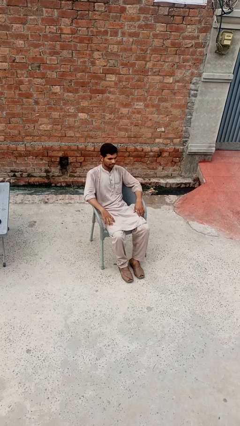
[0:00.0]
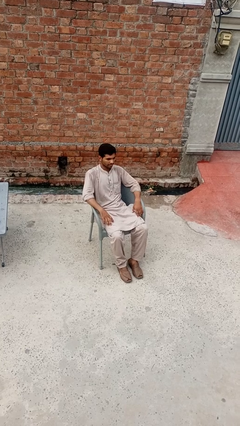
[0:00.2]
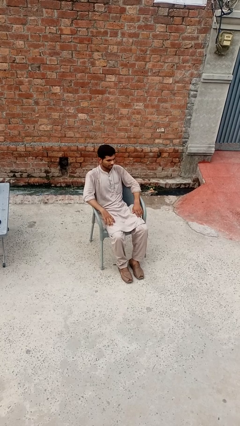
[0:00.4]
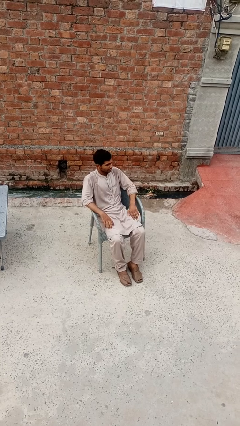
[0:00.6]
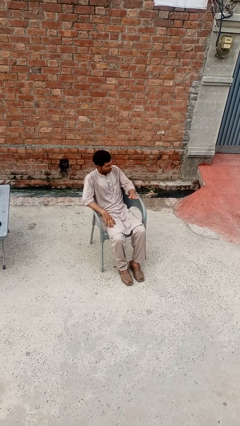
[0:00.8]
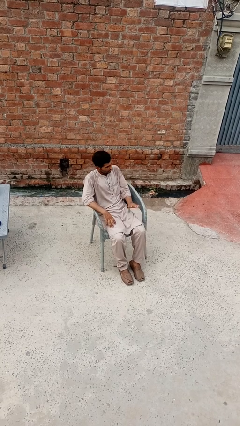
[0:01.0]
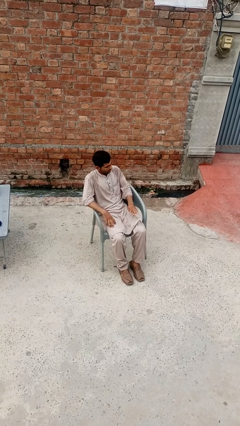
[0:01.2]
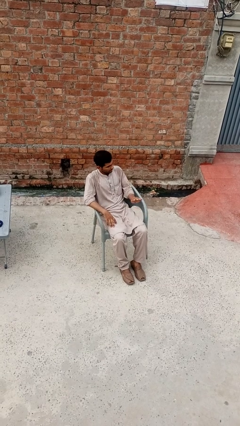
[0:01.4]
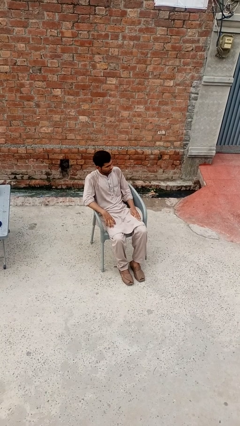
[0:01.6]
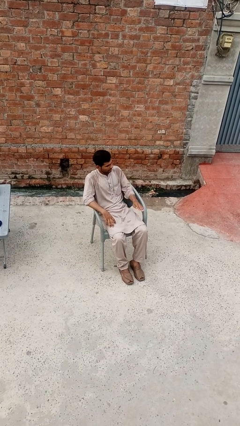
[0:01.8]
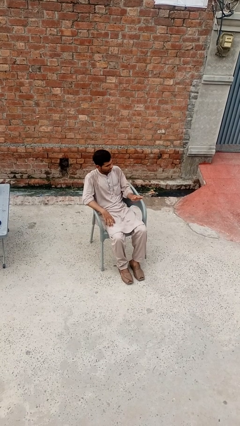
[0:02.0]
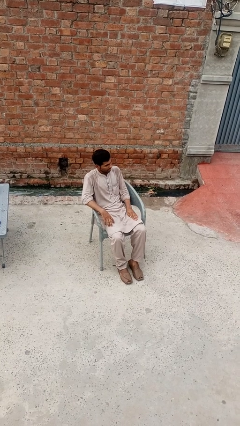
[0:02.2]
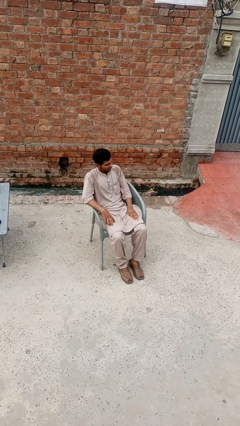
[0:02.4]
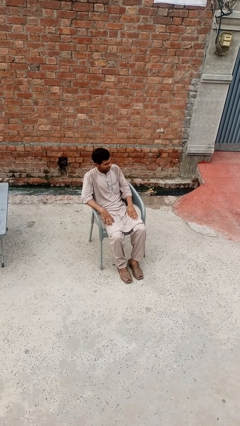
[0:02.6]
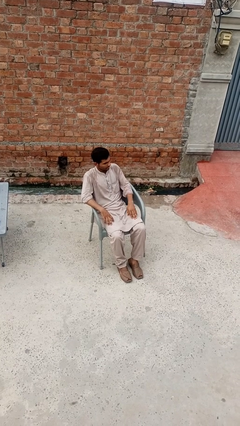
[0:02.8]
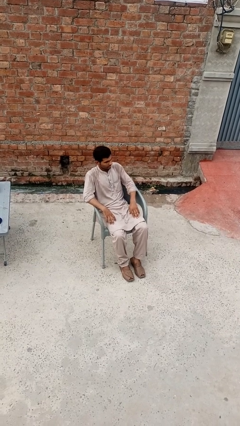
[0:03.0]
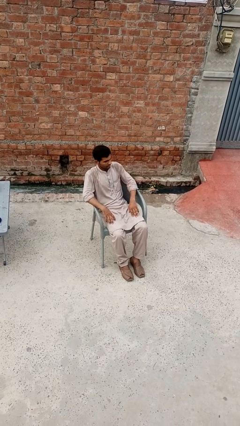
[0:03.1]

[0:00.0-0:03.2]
person slaps hands on thighs

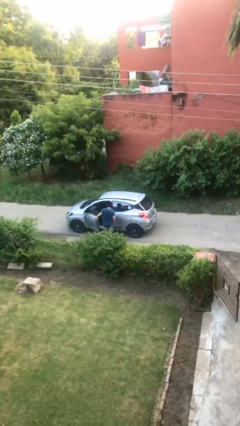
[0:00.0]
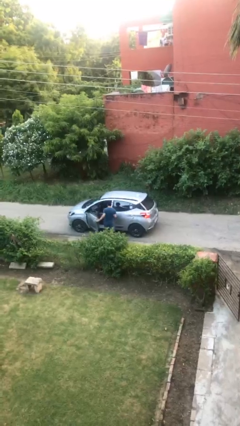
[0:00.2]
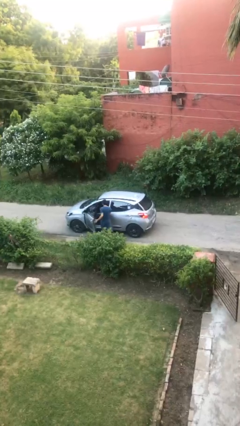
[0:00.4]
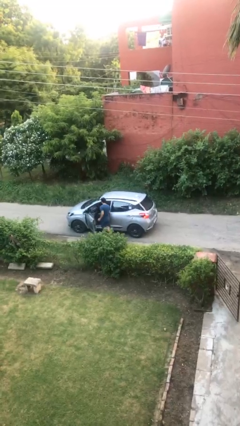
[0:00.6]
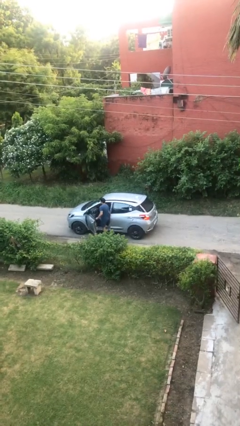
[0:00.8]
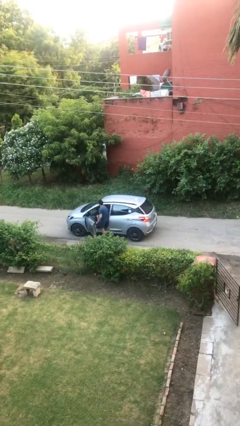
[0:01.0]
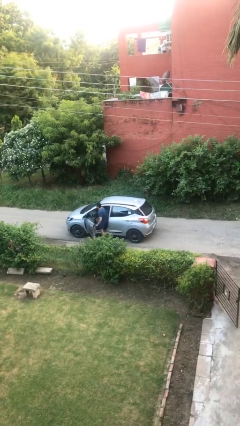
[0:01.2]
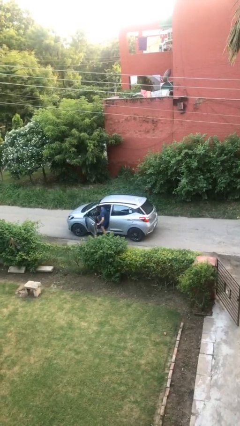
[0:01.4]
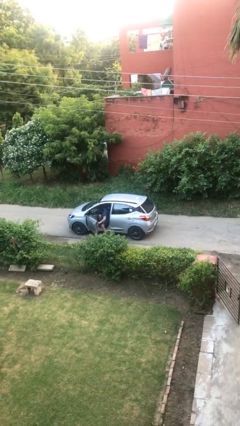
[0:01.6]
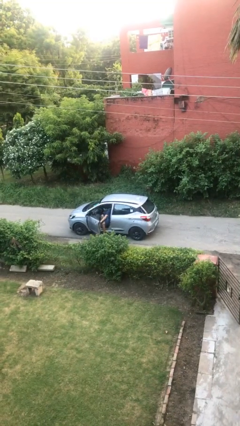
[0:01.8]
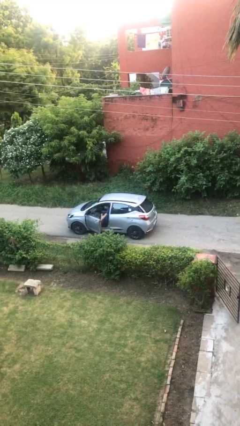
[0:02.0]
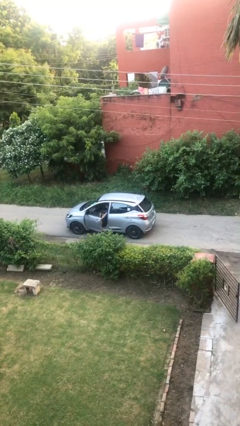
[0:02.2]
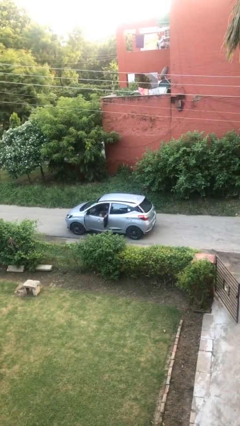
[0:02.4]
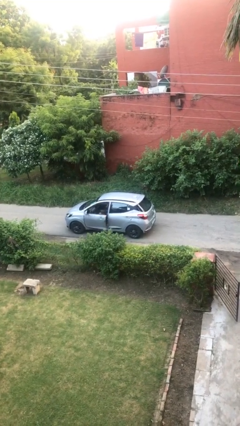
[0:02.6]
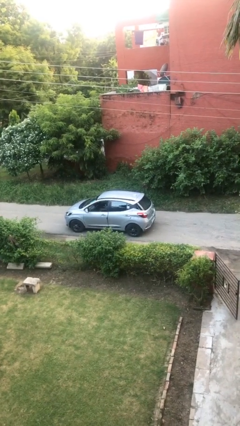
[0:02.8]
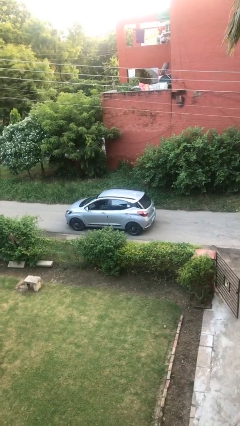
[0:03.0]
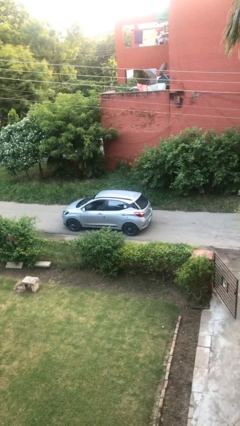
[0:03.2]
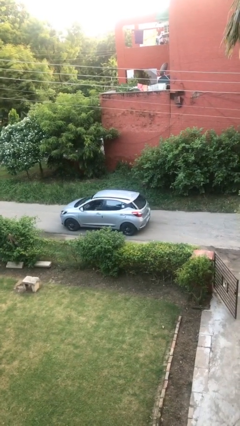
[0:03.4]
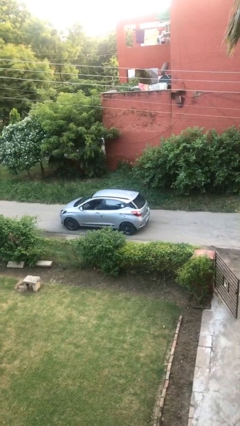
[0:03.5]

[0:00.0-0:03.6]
car picks up person

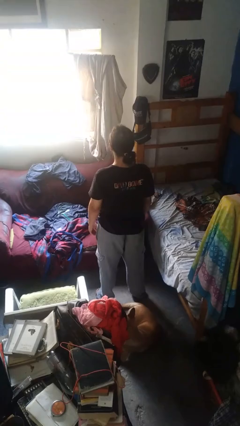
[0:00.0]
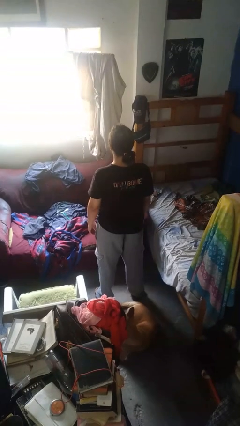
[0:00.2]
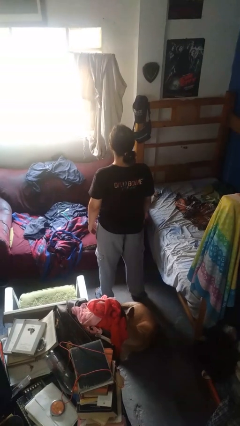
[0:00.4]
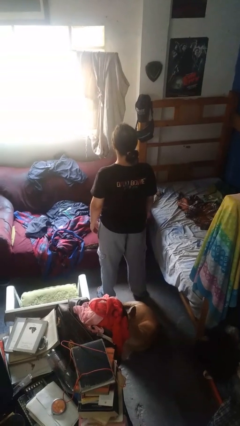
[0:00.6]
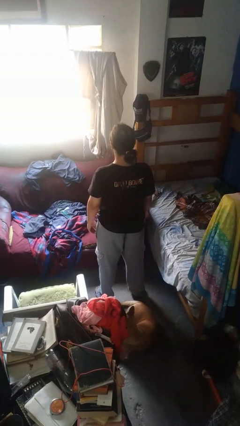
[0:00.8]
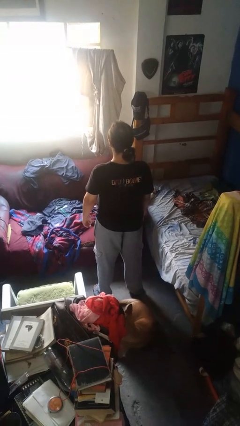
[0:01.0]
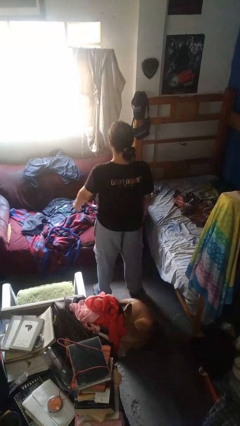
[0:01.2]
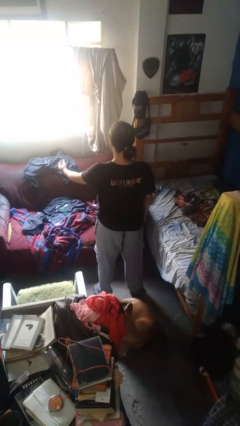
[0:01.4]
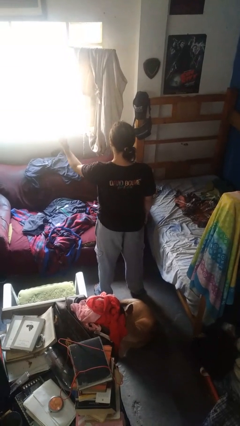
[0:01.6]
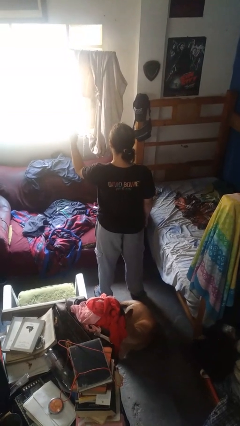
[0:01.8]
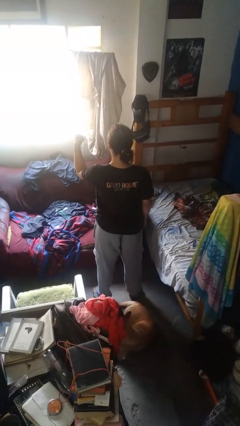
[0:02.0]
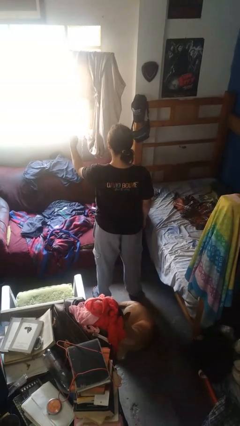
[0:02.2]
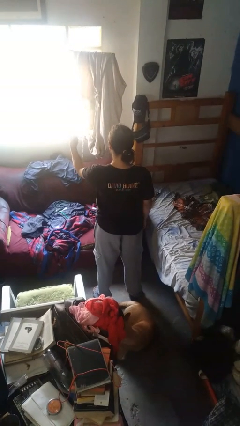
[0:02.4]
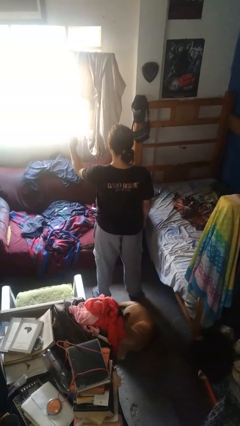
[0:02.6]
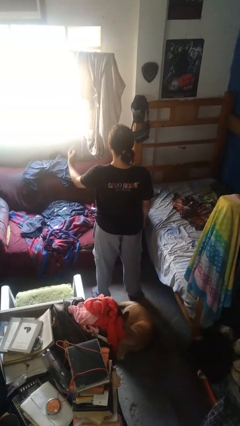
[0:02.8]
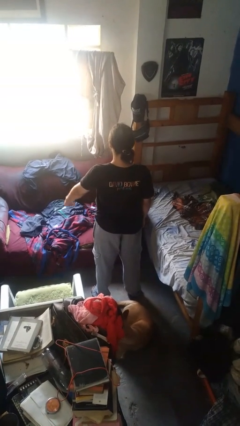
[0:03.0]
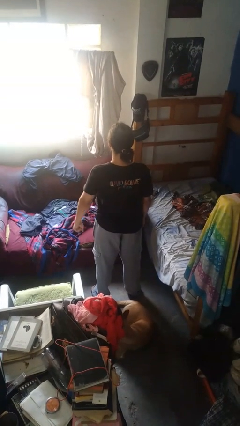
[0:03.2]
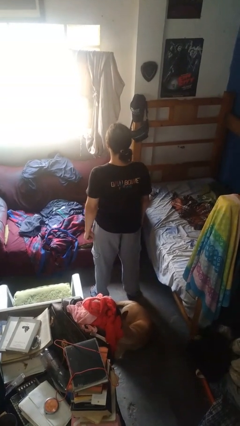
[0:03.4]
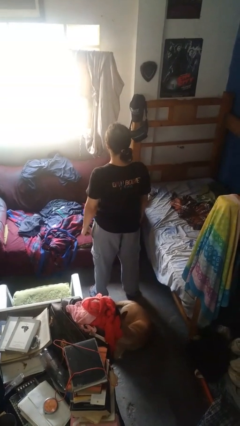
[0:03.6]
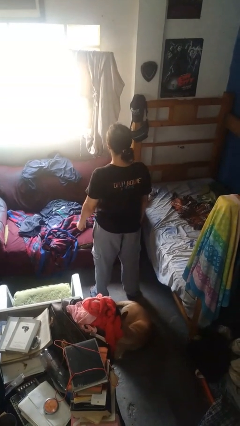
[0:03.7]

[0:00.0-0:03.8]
person gestures number one

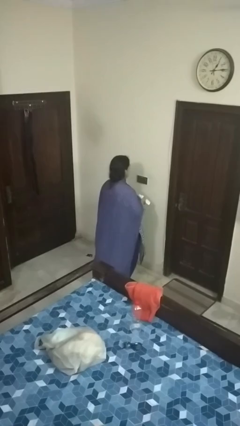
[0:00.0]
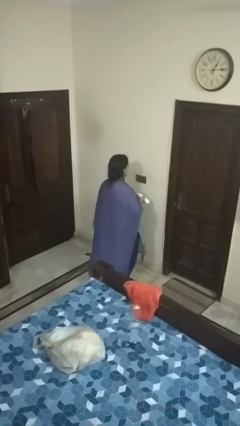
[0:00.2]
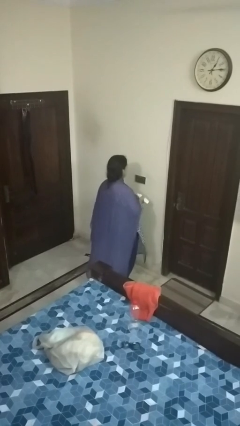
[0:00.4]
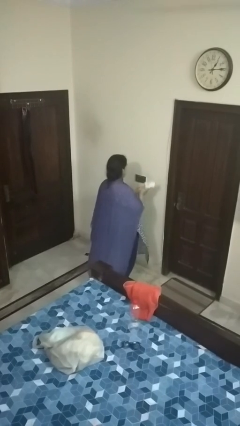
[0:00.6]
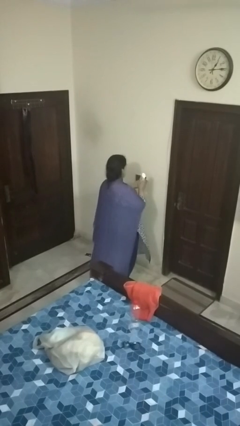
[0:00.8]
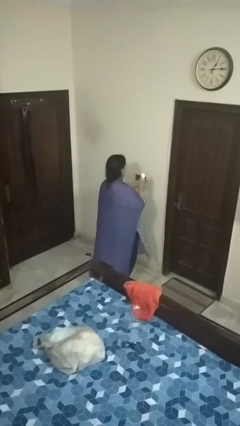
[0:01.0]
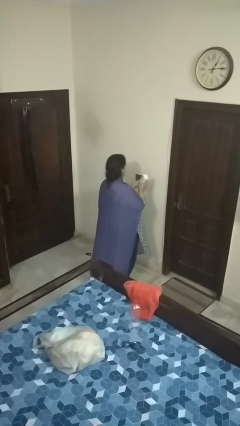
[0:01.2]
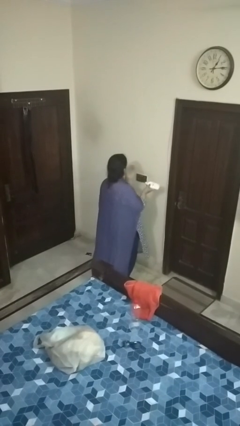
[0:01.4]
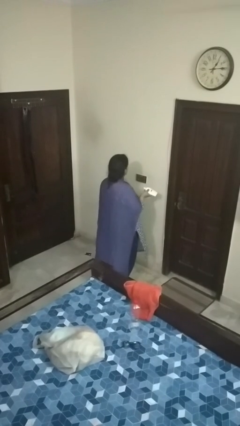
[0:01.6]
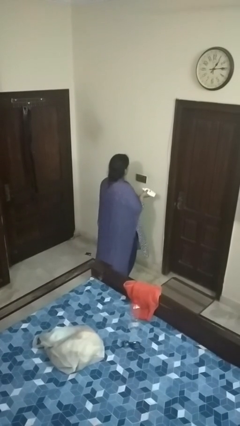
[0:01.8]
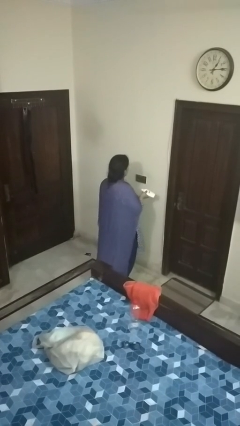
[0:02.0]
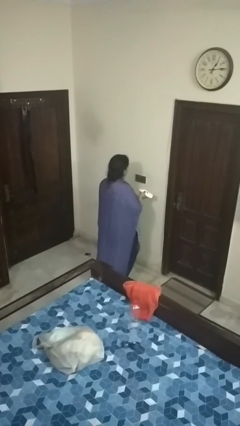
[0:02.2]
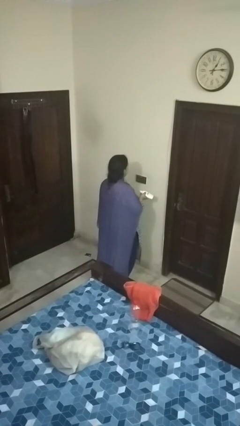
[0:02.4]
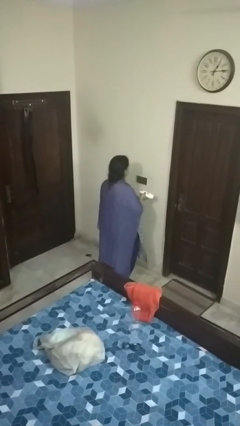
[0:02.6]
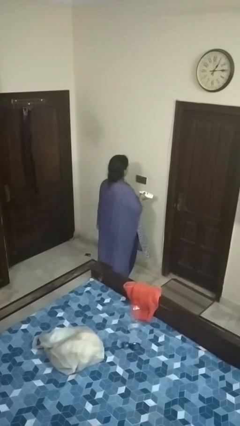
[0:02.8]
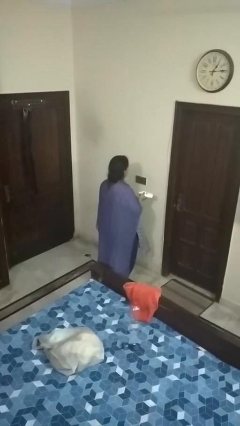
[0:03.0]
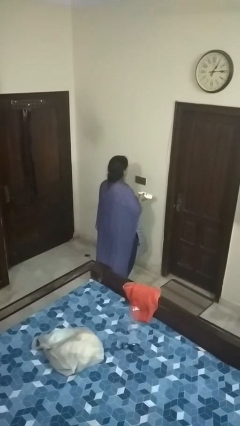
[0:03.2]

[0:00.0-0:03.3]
person applies facial moisturizer

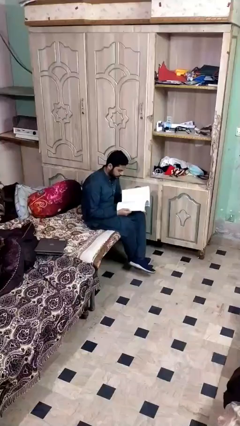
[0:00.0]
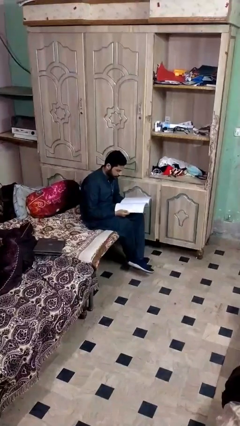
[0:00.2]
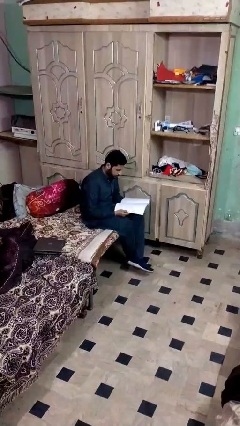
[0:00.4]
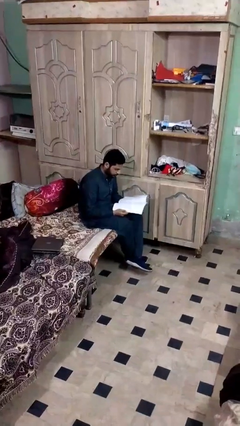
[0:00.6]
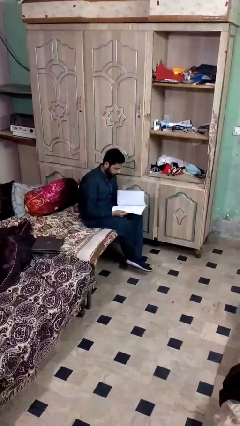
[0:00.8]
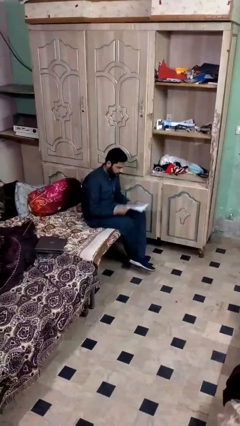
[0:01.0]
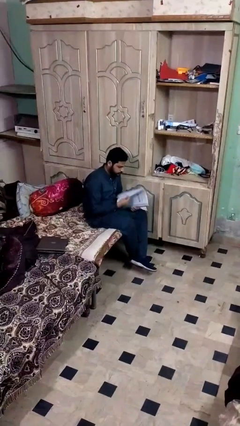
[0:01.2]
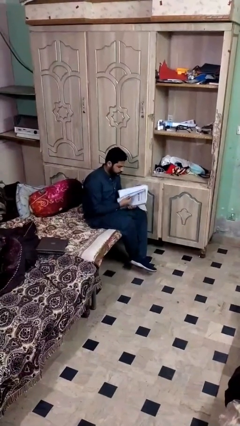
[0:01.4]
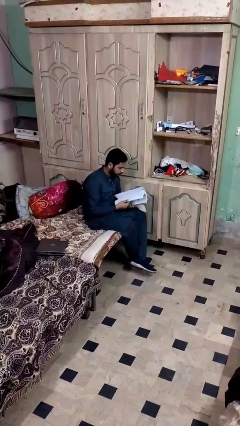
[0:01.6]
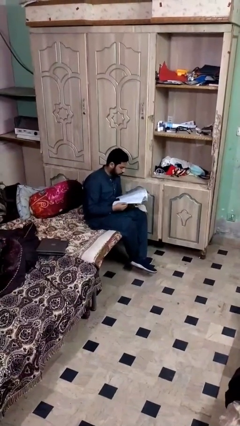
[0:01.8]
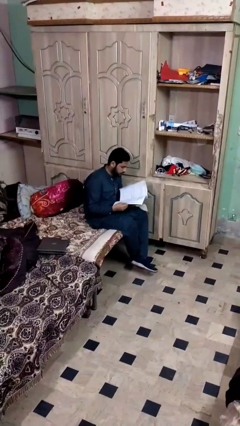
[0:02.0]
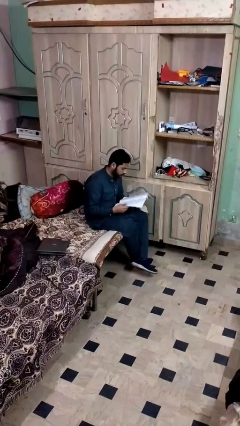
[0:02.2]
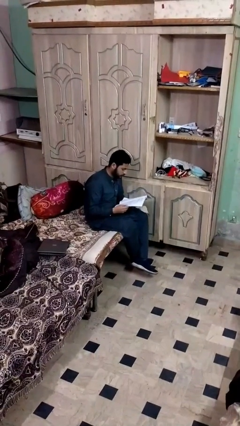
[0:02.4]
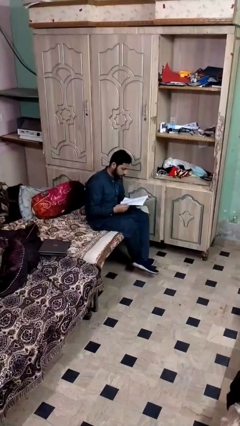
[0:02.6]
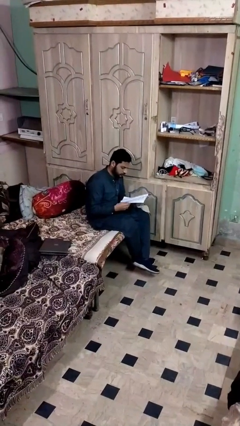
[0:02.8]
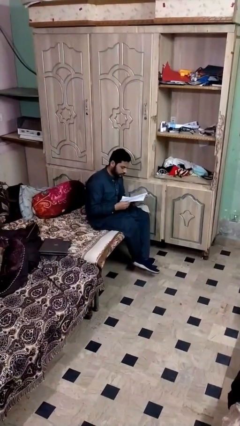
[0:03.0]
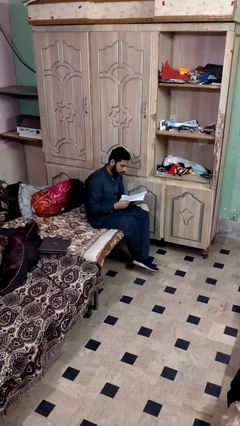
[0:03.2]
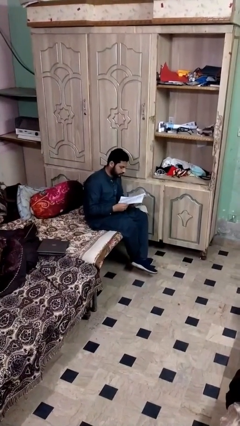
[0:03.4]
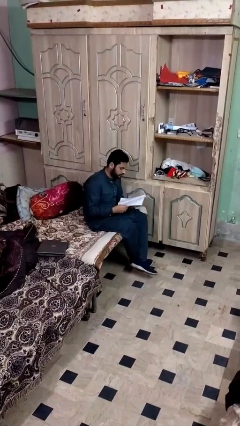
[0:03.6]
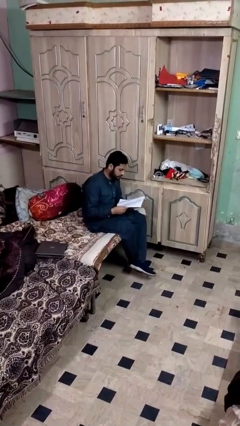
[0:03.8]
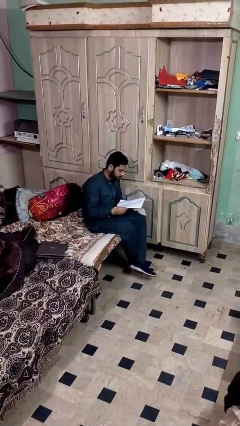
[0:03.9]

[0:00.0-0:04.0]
person reads document
